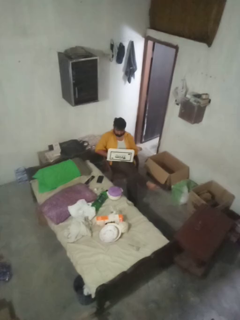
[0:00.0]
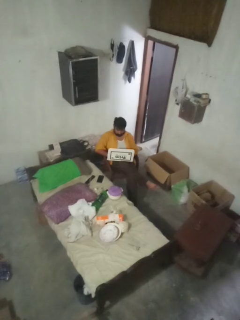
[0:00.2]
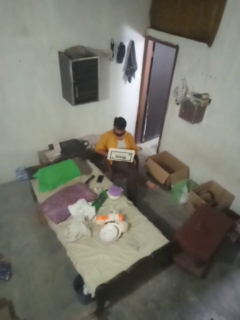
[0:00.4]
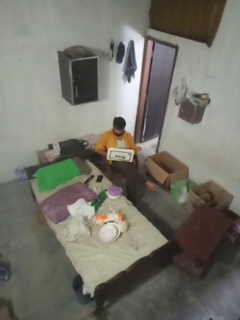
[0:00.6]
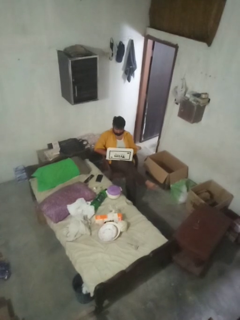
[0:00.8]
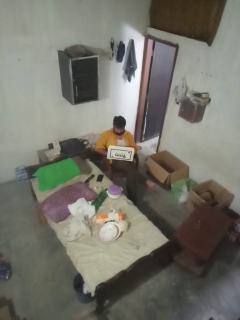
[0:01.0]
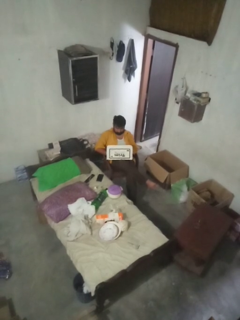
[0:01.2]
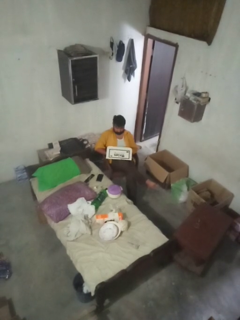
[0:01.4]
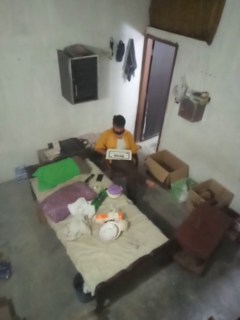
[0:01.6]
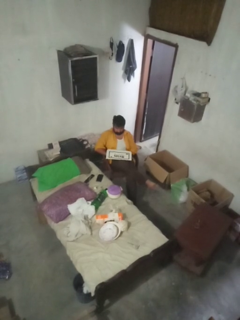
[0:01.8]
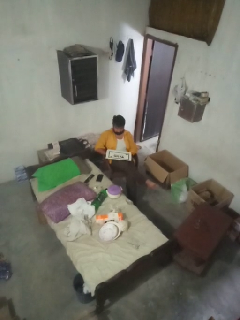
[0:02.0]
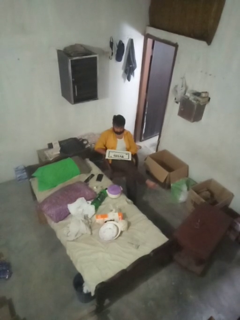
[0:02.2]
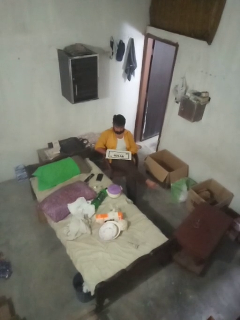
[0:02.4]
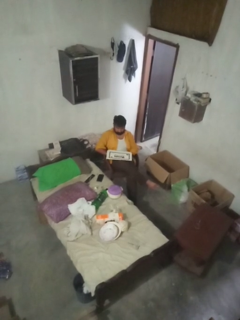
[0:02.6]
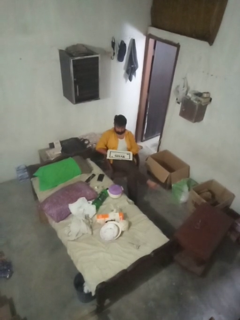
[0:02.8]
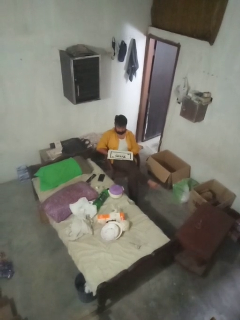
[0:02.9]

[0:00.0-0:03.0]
person closes laptop

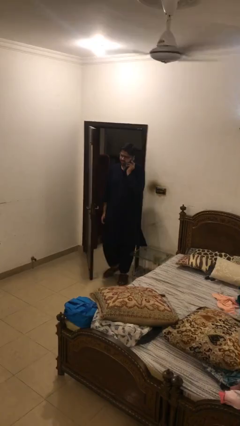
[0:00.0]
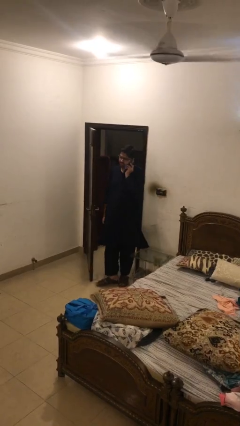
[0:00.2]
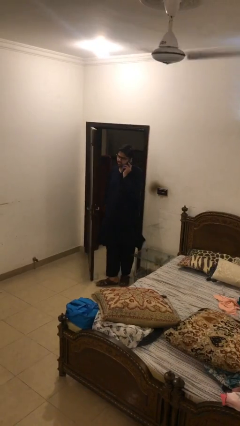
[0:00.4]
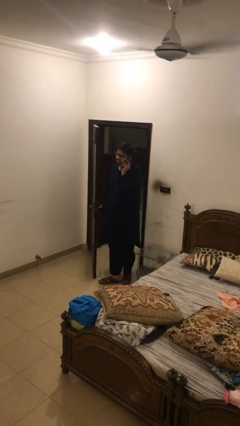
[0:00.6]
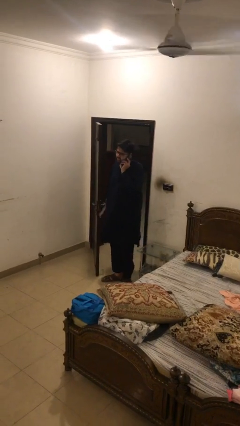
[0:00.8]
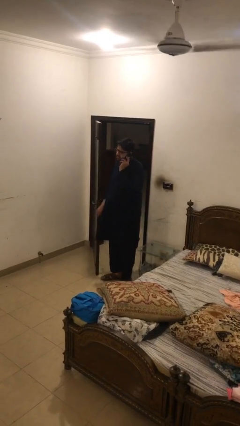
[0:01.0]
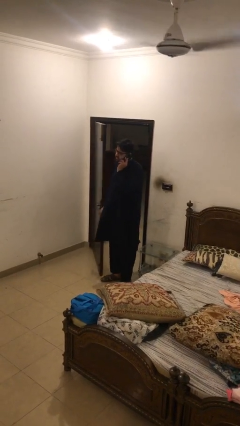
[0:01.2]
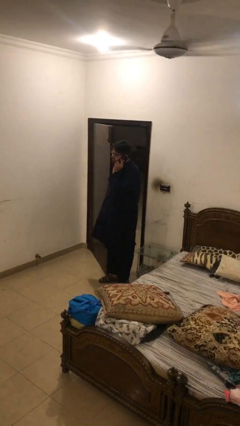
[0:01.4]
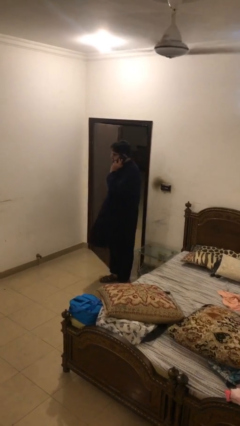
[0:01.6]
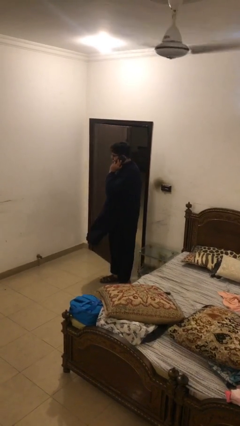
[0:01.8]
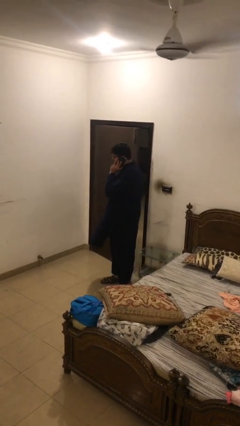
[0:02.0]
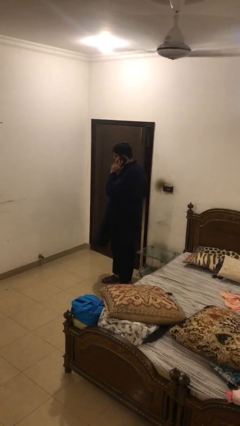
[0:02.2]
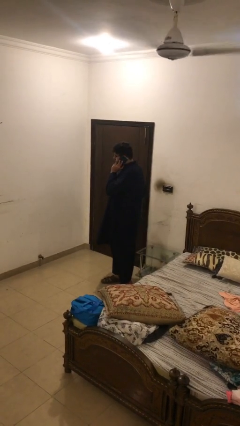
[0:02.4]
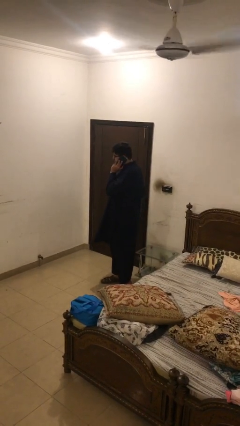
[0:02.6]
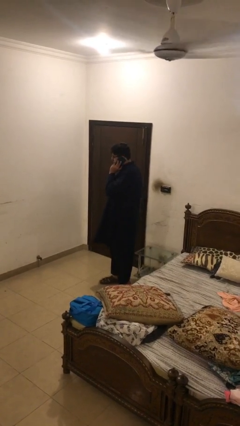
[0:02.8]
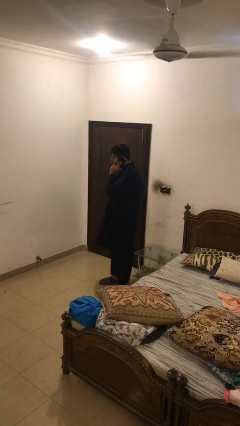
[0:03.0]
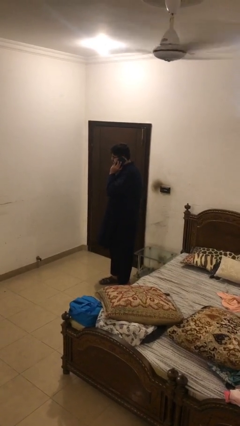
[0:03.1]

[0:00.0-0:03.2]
person closes facility door

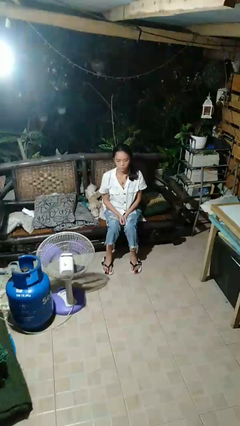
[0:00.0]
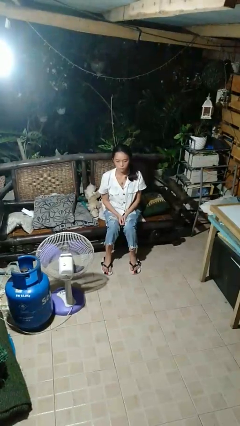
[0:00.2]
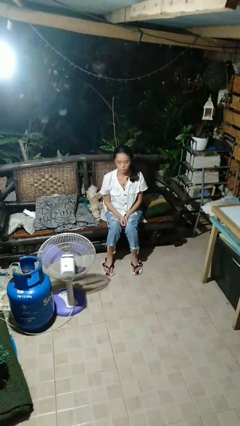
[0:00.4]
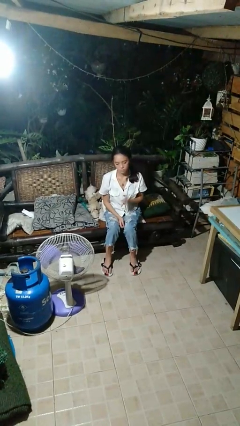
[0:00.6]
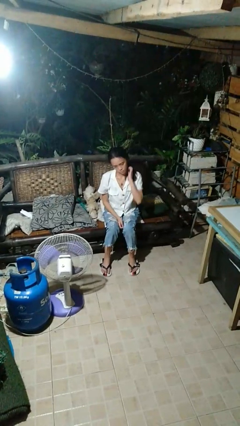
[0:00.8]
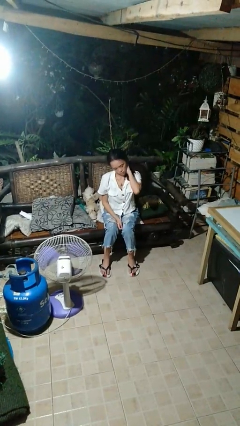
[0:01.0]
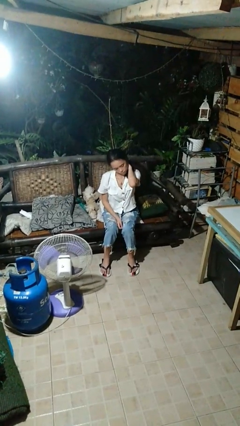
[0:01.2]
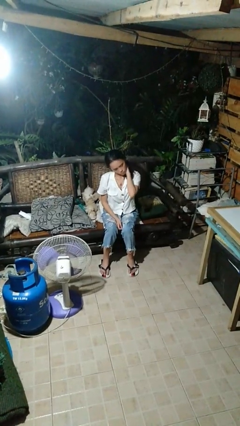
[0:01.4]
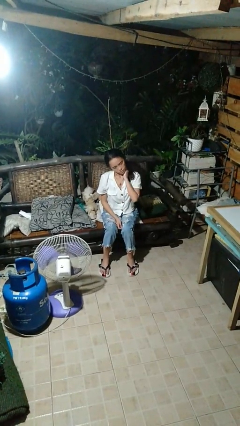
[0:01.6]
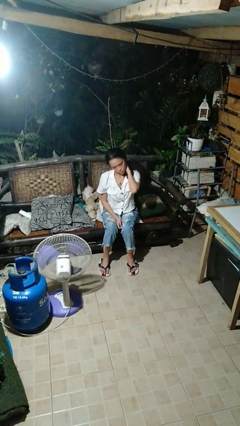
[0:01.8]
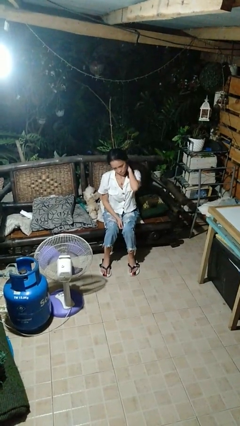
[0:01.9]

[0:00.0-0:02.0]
person rubs neck

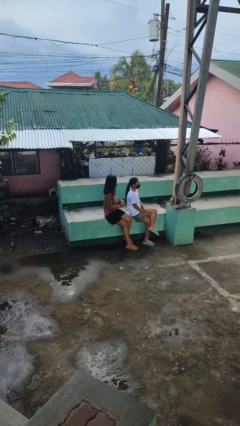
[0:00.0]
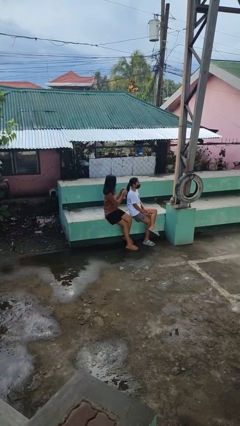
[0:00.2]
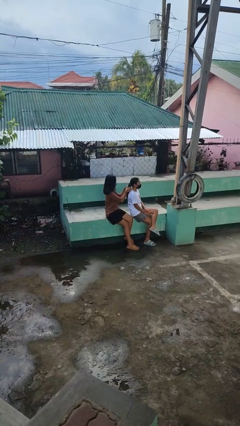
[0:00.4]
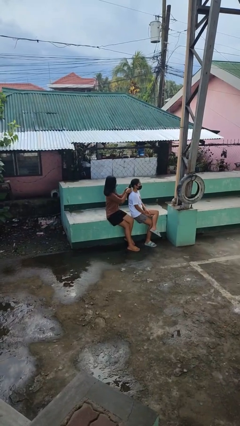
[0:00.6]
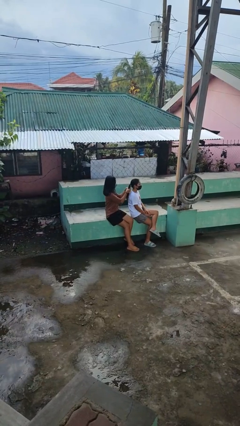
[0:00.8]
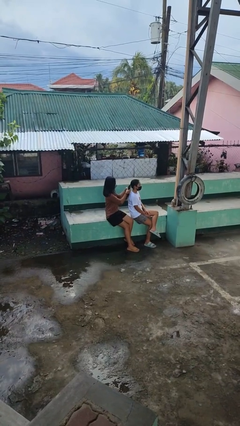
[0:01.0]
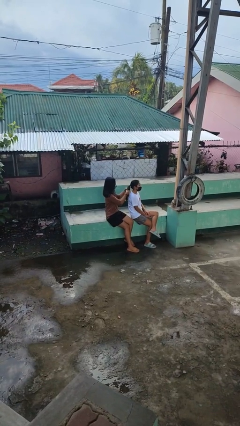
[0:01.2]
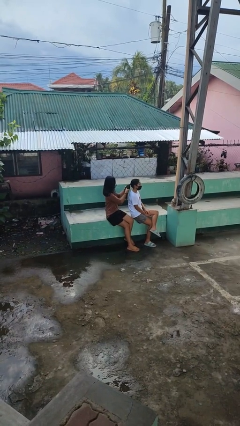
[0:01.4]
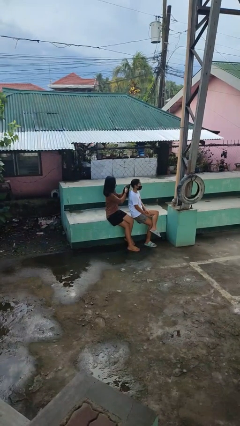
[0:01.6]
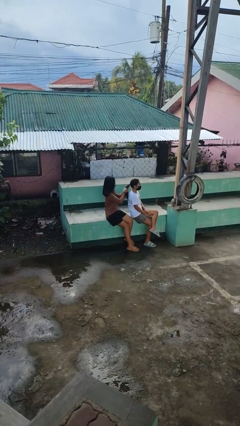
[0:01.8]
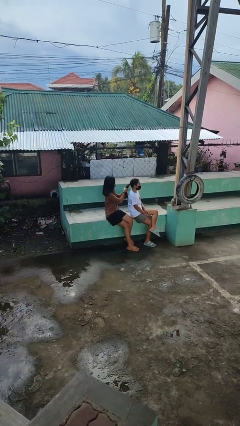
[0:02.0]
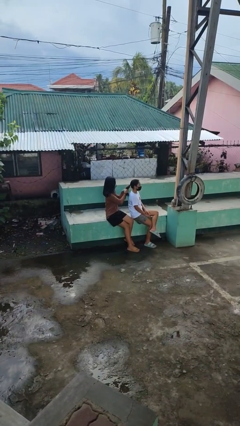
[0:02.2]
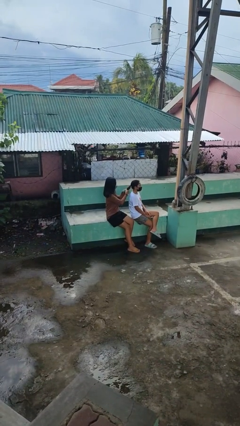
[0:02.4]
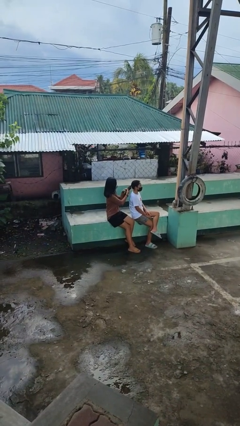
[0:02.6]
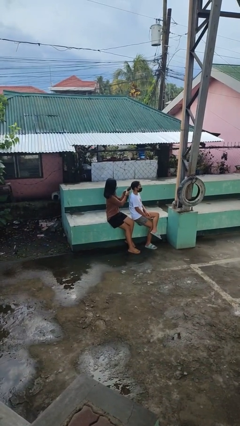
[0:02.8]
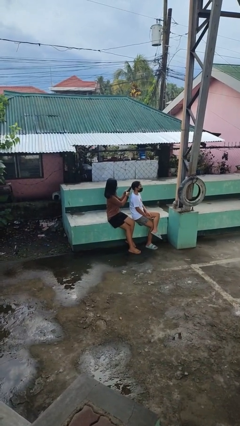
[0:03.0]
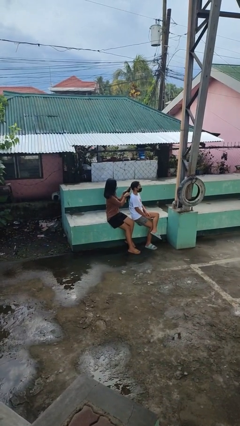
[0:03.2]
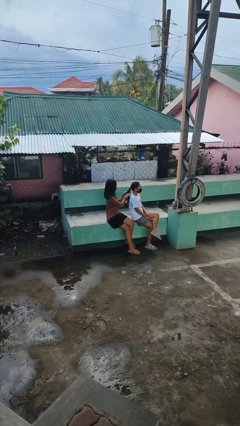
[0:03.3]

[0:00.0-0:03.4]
person braids hair of person

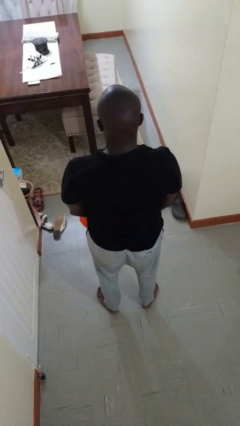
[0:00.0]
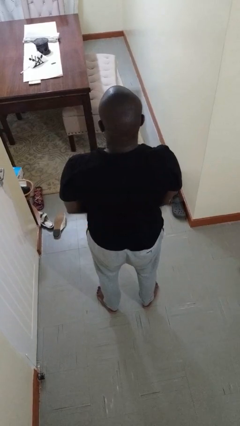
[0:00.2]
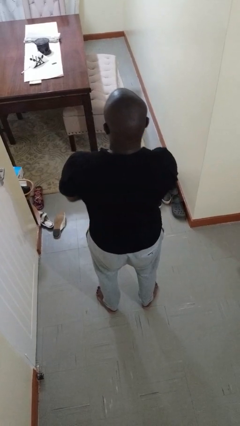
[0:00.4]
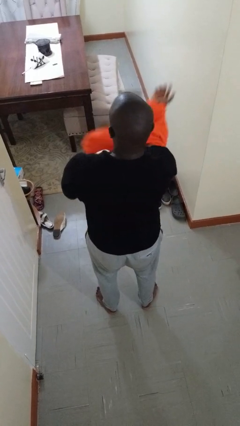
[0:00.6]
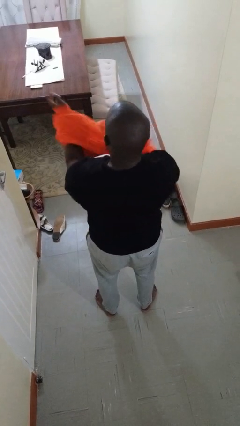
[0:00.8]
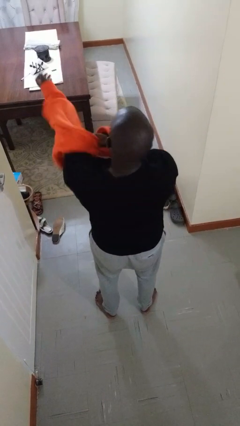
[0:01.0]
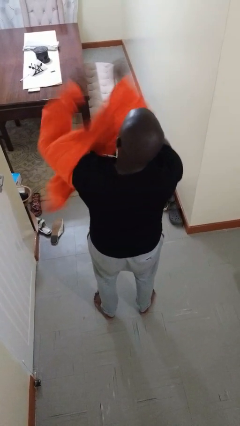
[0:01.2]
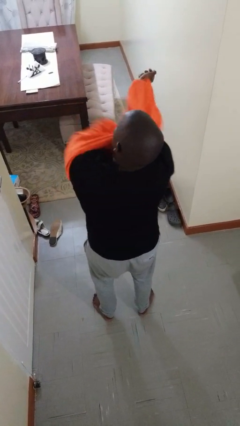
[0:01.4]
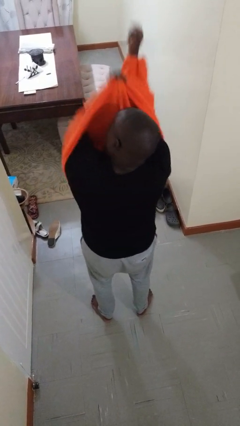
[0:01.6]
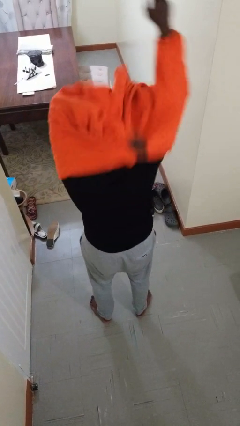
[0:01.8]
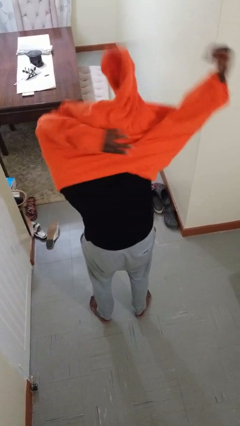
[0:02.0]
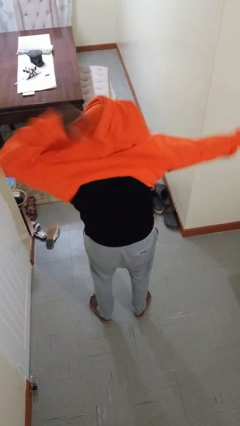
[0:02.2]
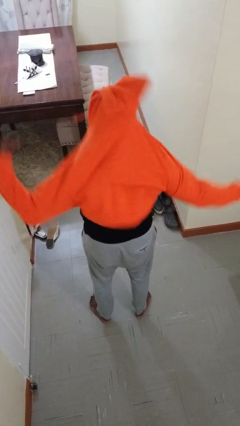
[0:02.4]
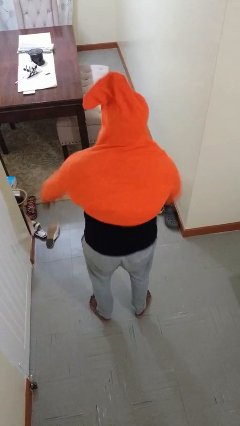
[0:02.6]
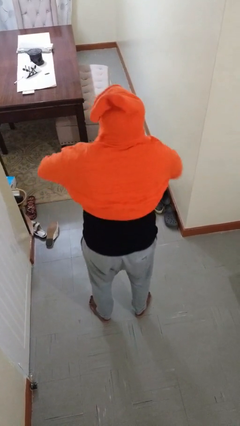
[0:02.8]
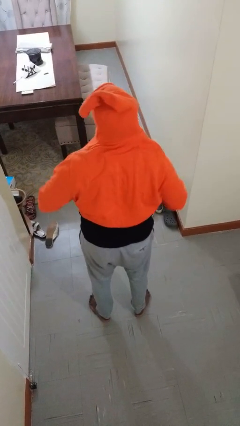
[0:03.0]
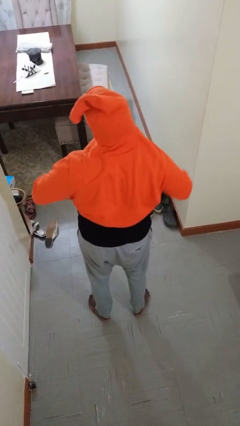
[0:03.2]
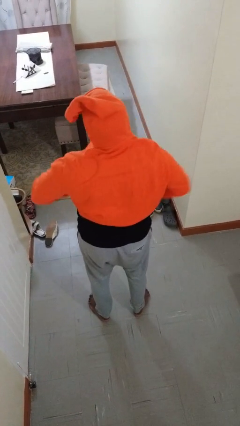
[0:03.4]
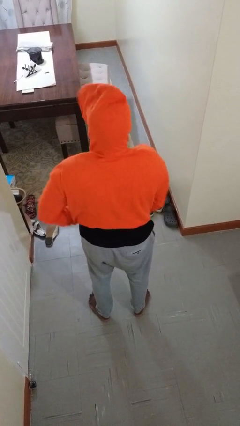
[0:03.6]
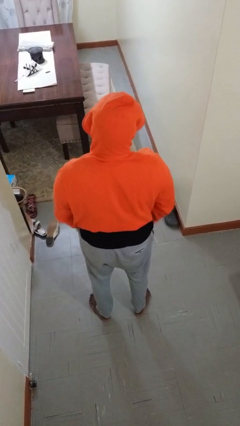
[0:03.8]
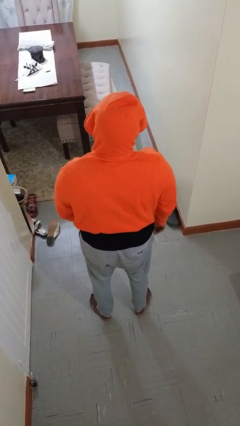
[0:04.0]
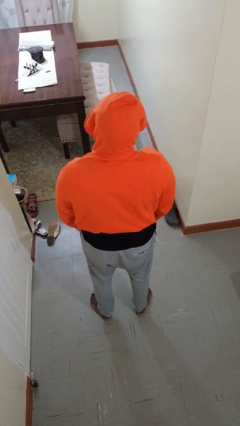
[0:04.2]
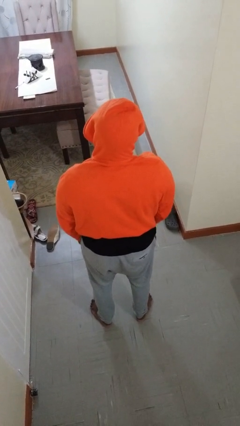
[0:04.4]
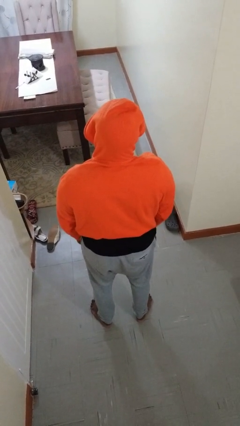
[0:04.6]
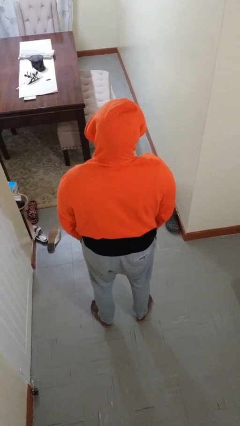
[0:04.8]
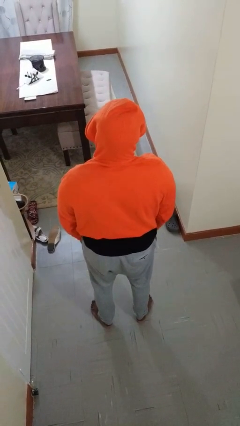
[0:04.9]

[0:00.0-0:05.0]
person puts on hoodie

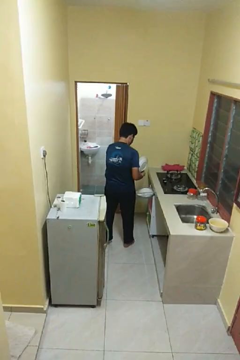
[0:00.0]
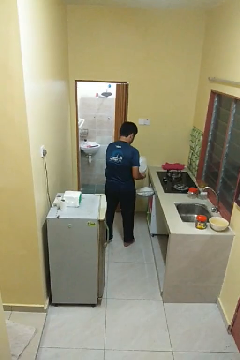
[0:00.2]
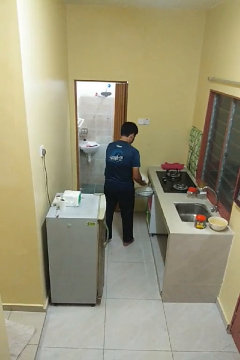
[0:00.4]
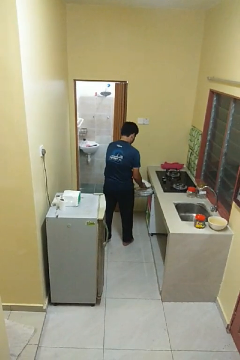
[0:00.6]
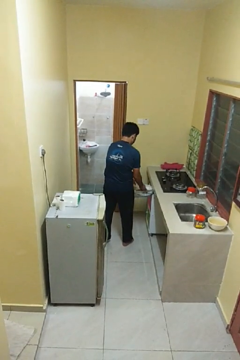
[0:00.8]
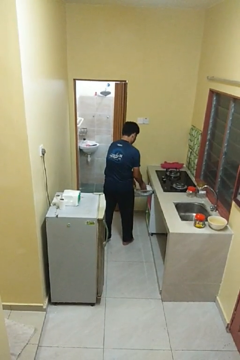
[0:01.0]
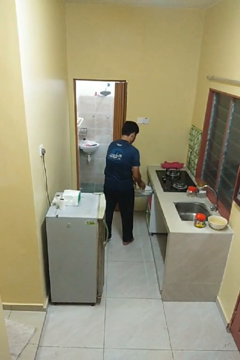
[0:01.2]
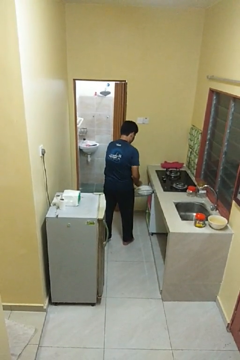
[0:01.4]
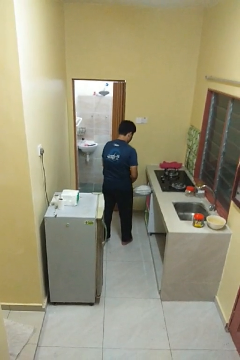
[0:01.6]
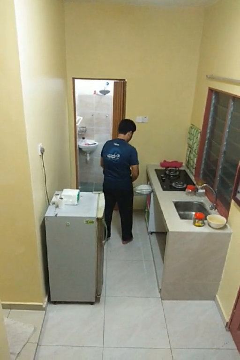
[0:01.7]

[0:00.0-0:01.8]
person puts object into kitchen drawer
